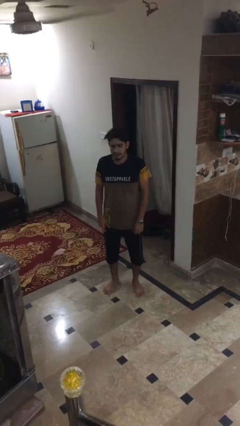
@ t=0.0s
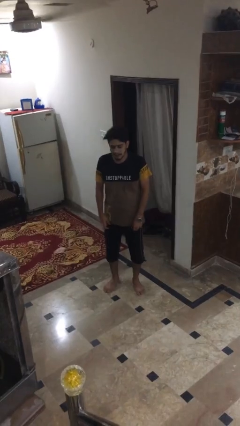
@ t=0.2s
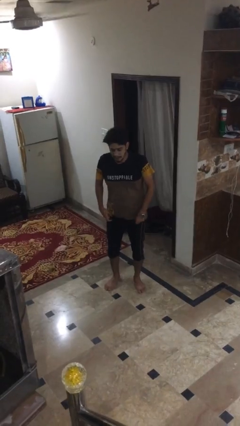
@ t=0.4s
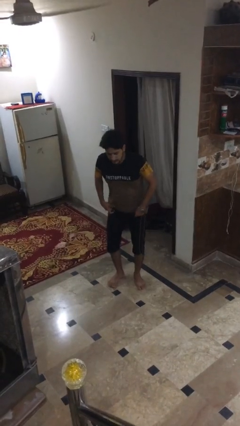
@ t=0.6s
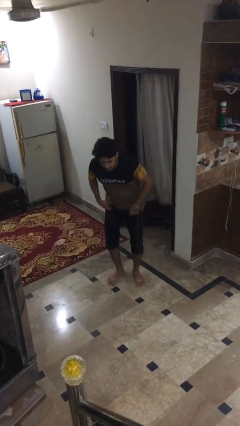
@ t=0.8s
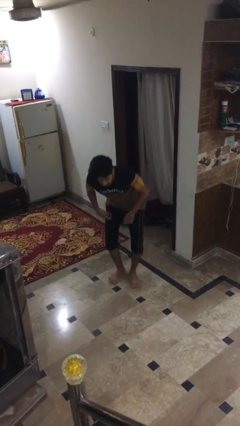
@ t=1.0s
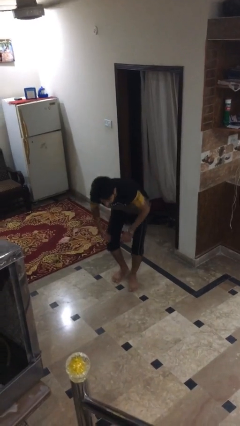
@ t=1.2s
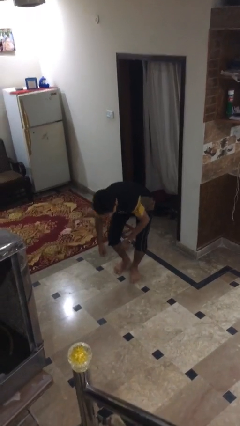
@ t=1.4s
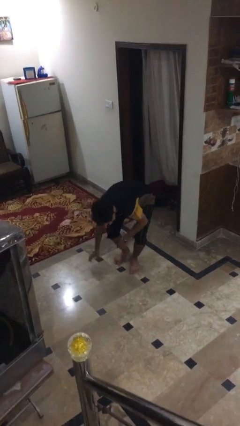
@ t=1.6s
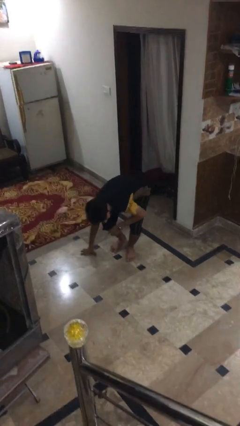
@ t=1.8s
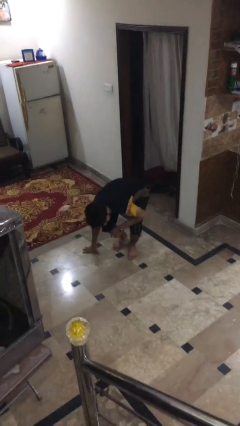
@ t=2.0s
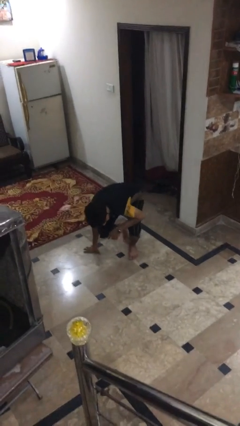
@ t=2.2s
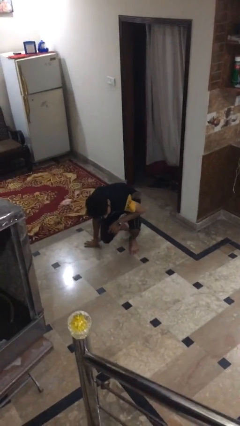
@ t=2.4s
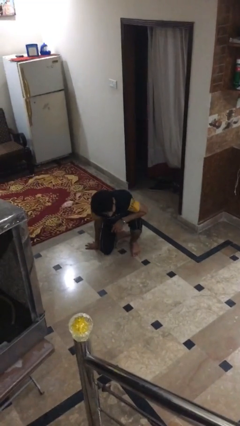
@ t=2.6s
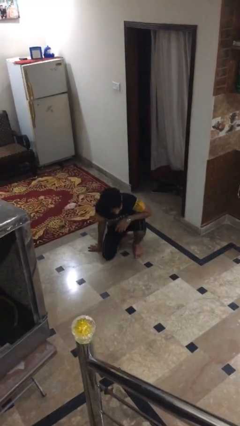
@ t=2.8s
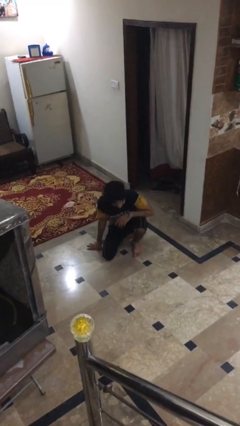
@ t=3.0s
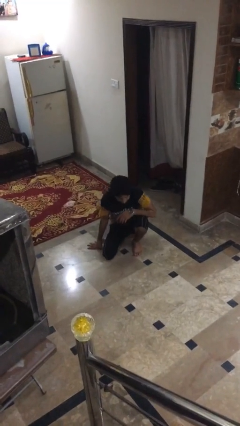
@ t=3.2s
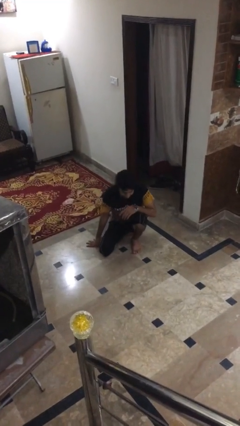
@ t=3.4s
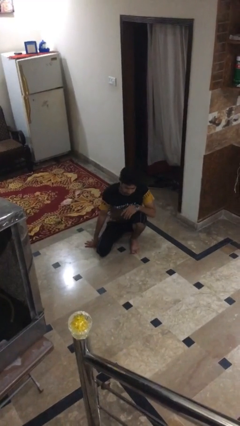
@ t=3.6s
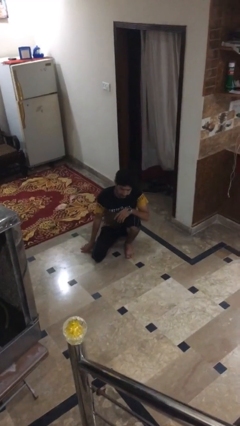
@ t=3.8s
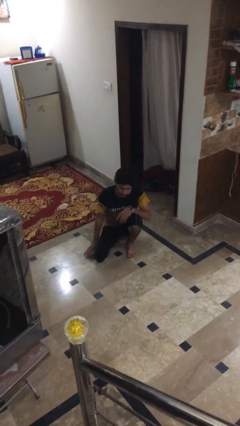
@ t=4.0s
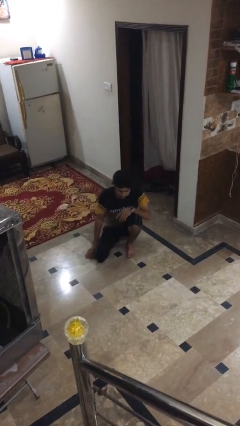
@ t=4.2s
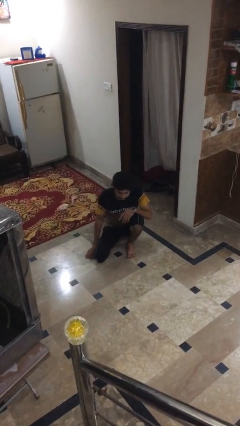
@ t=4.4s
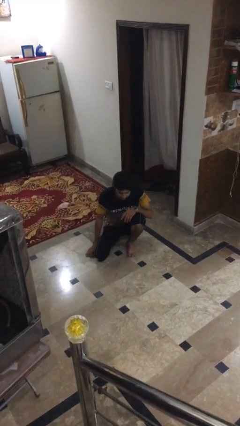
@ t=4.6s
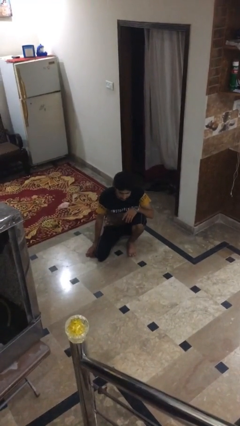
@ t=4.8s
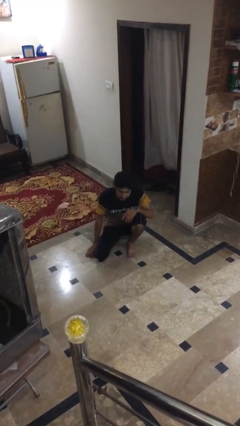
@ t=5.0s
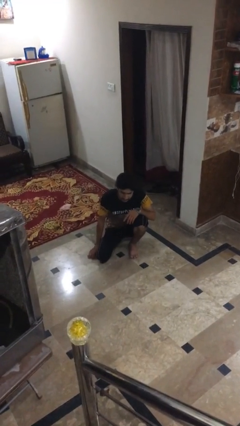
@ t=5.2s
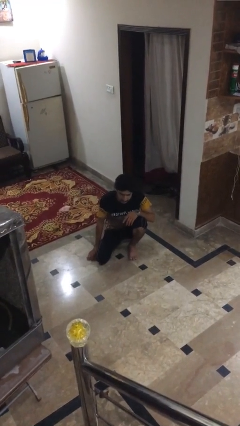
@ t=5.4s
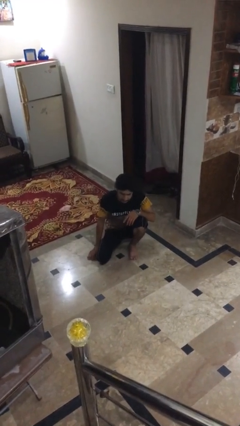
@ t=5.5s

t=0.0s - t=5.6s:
person sits crisscross

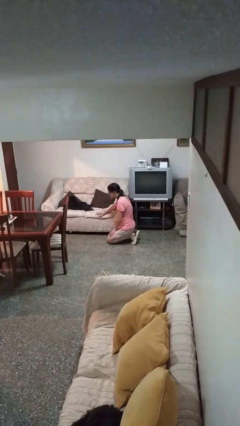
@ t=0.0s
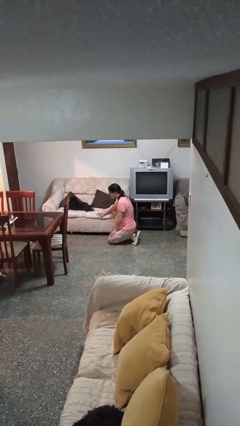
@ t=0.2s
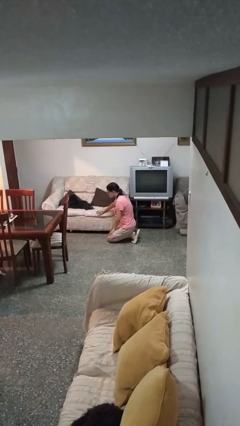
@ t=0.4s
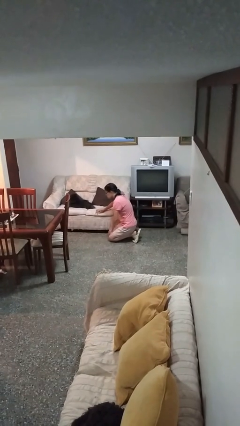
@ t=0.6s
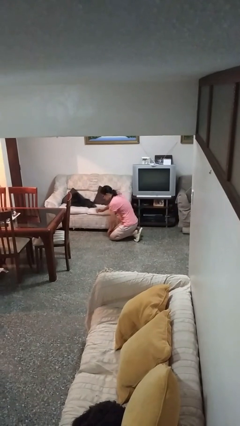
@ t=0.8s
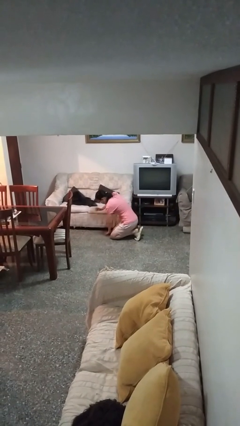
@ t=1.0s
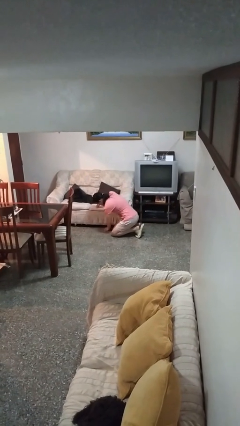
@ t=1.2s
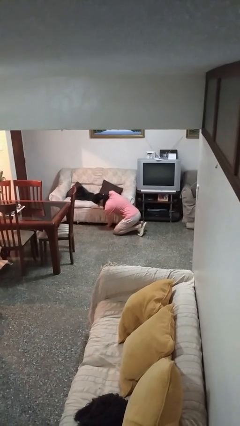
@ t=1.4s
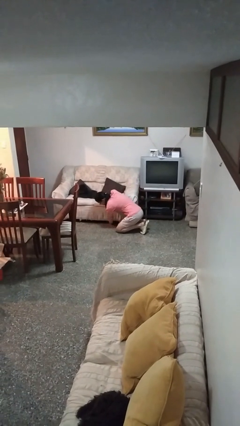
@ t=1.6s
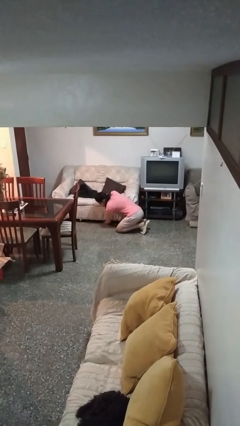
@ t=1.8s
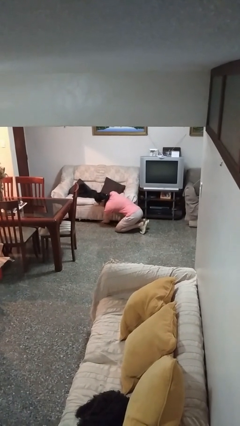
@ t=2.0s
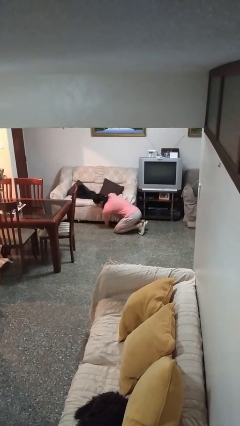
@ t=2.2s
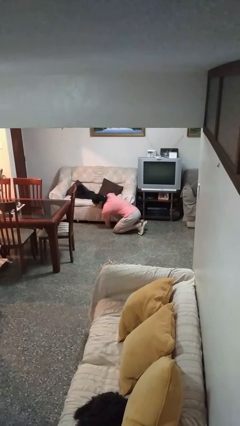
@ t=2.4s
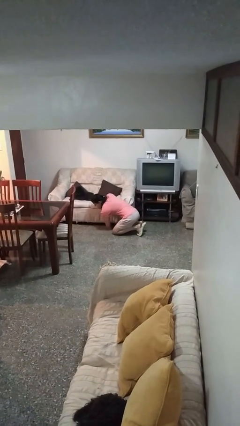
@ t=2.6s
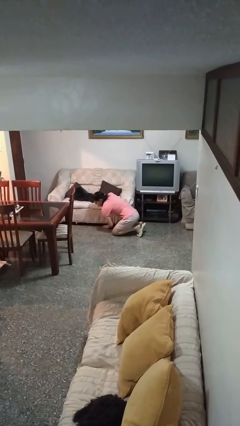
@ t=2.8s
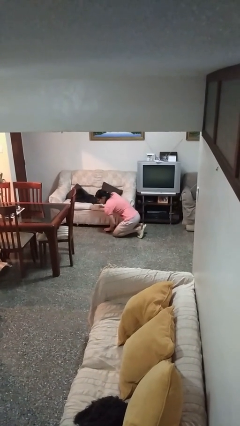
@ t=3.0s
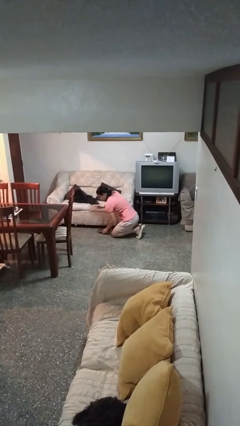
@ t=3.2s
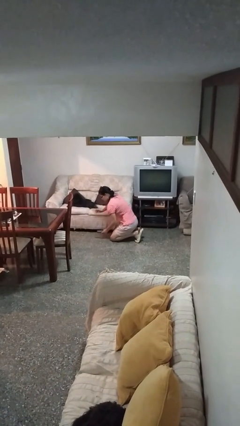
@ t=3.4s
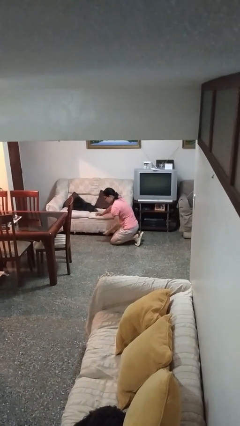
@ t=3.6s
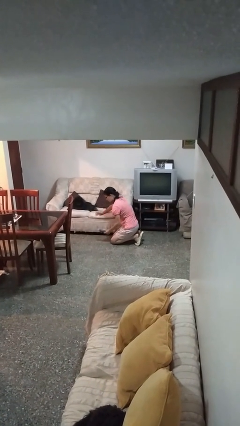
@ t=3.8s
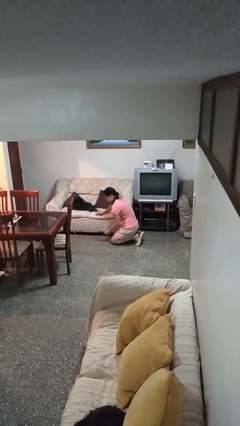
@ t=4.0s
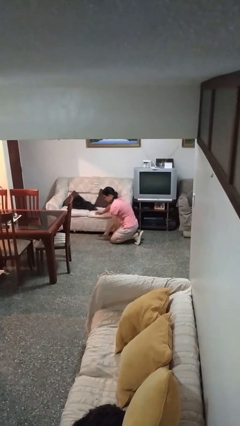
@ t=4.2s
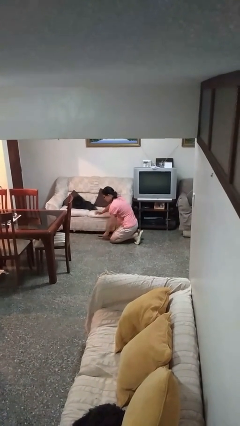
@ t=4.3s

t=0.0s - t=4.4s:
person searches under couch

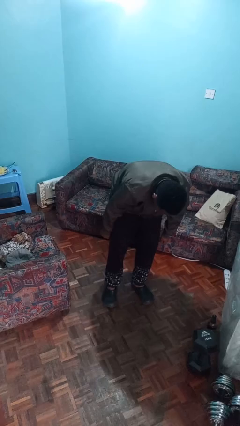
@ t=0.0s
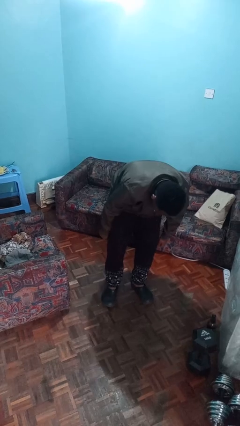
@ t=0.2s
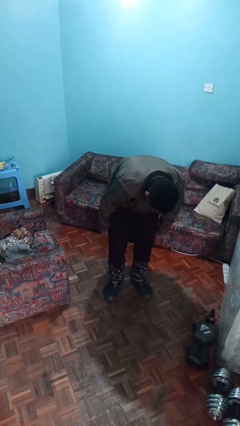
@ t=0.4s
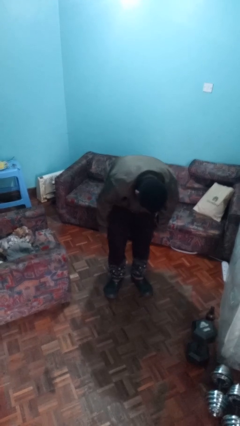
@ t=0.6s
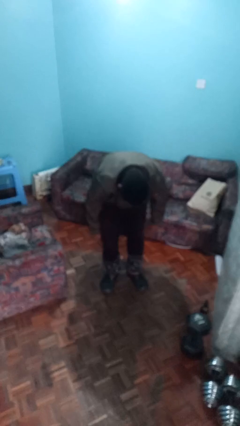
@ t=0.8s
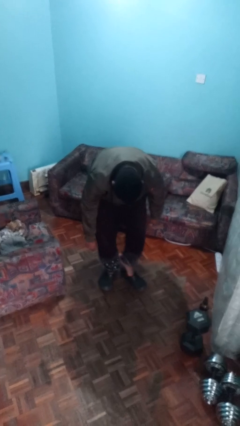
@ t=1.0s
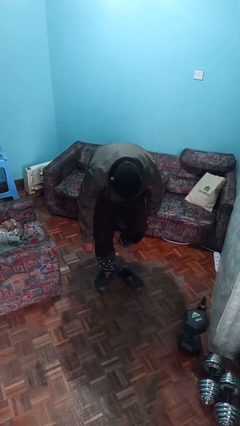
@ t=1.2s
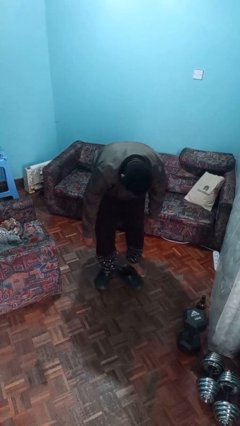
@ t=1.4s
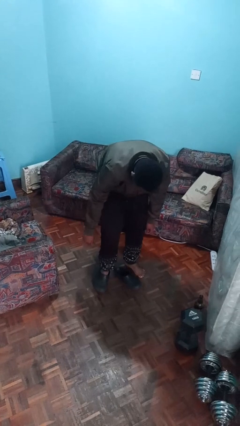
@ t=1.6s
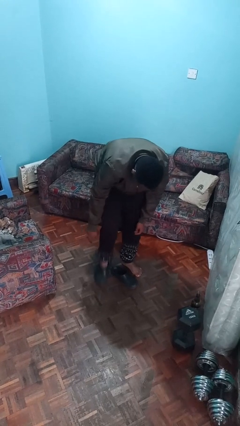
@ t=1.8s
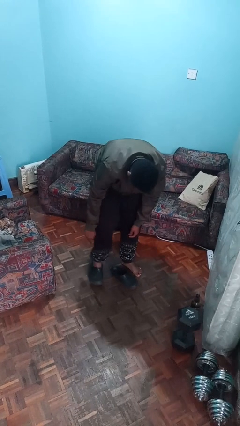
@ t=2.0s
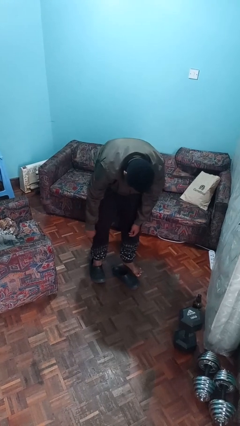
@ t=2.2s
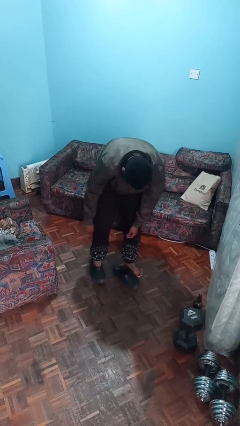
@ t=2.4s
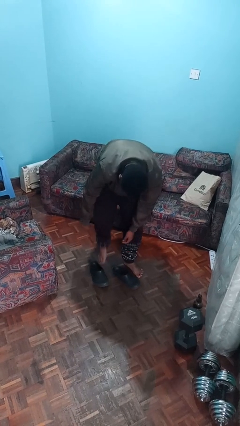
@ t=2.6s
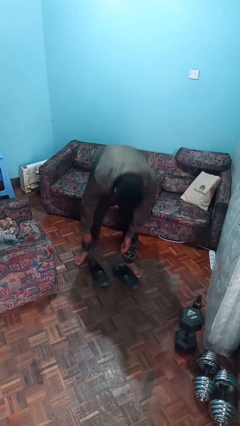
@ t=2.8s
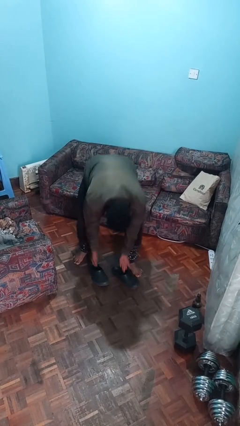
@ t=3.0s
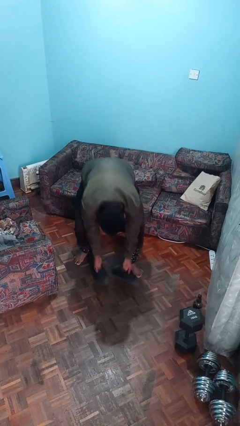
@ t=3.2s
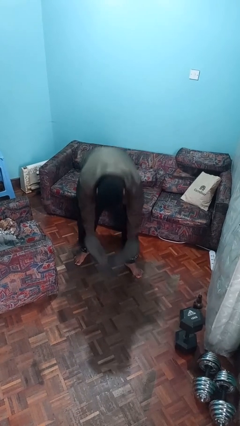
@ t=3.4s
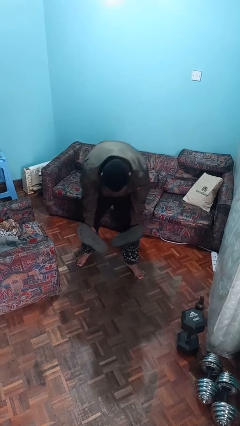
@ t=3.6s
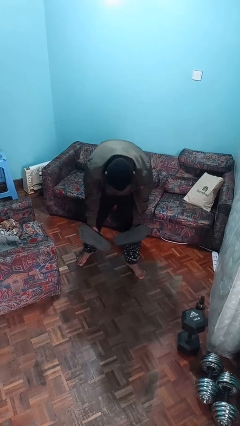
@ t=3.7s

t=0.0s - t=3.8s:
person takes off shoes

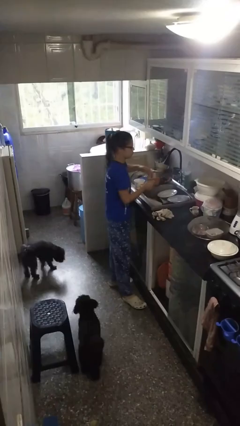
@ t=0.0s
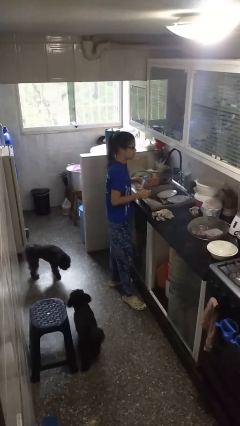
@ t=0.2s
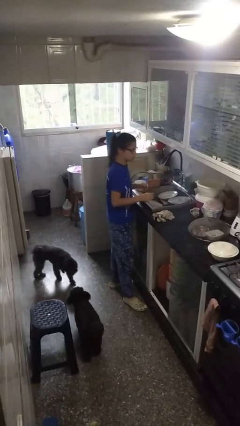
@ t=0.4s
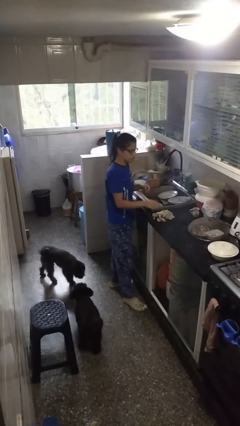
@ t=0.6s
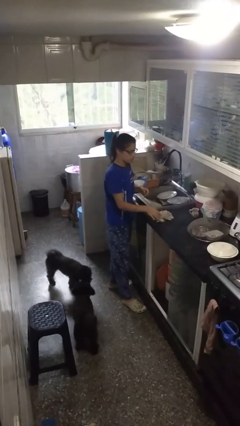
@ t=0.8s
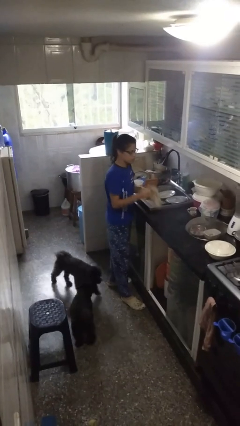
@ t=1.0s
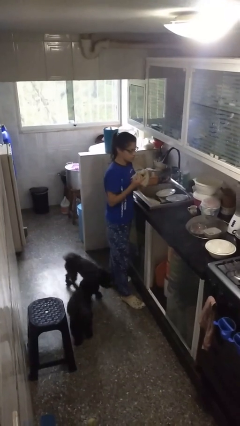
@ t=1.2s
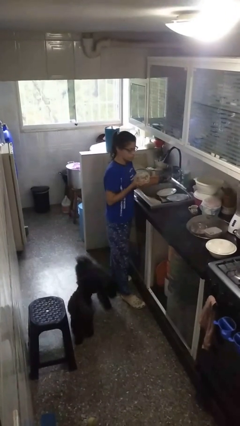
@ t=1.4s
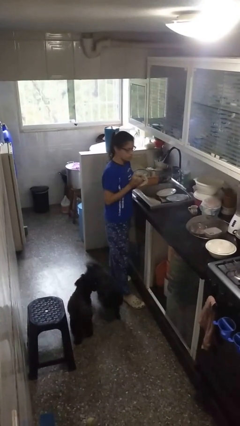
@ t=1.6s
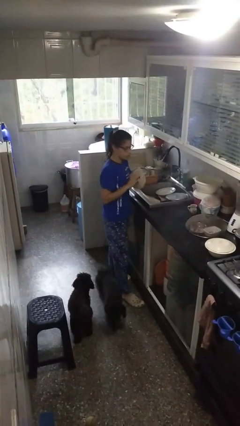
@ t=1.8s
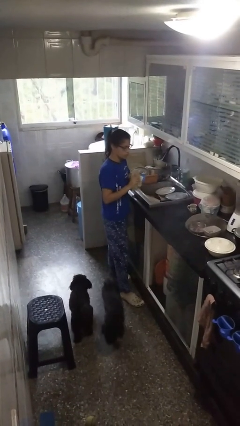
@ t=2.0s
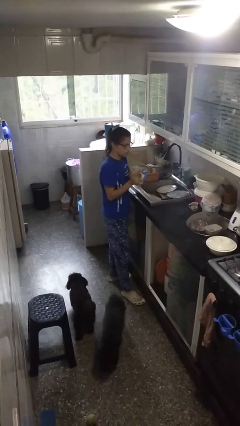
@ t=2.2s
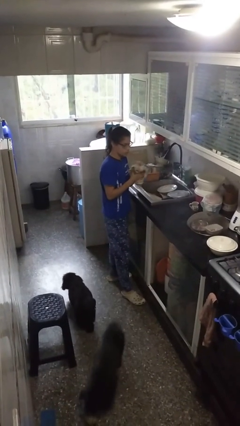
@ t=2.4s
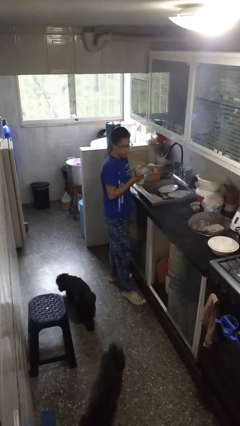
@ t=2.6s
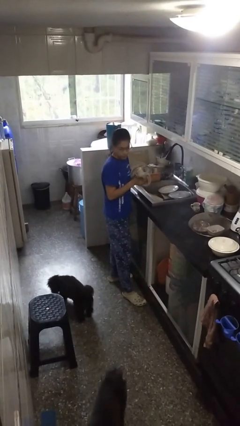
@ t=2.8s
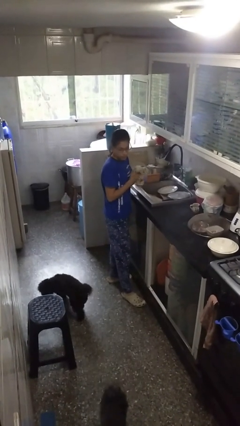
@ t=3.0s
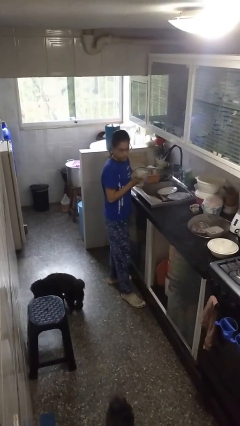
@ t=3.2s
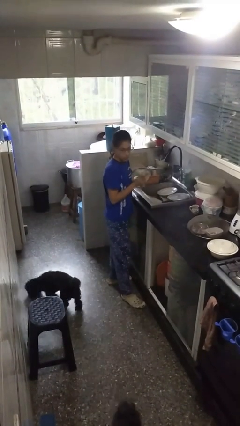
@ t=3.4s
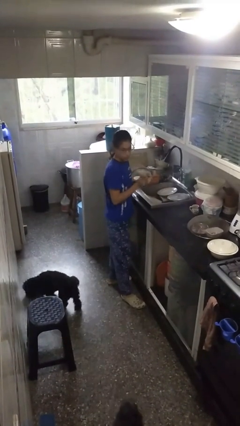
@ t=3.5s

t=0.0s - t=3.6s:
person dries hands with towel

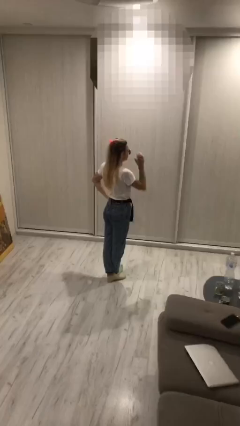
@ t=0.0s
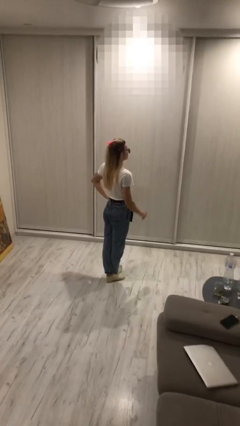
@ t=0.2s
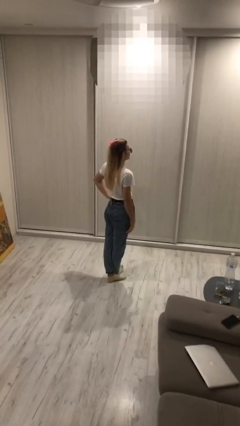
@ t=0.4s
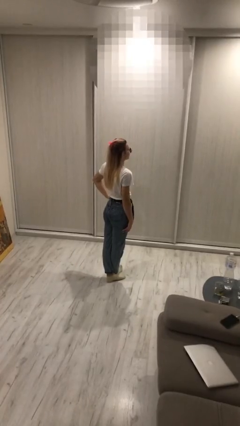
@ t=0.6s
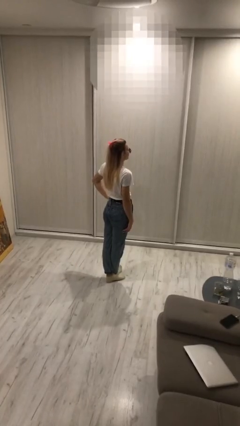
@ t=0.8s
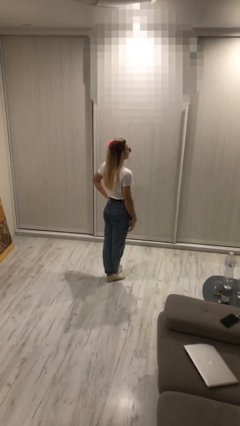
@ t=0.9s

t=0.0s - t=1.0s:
person takes off sunglasses
